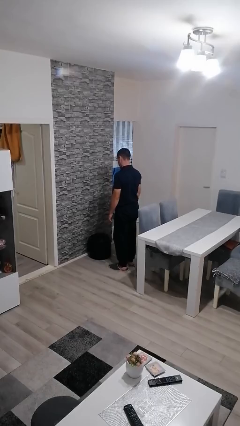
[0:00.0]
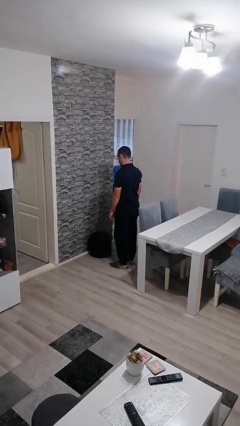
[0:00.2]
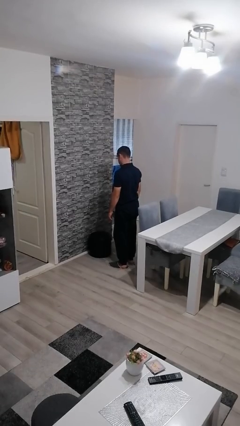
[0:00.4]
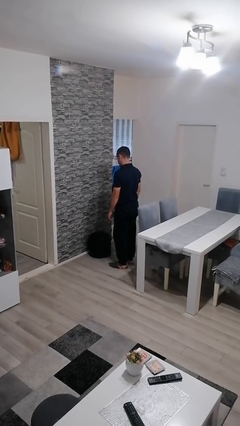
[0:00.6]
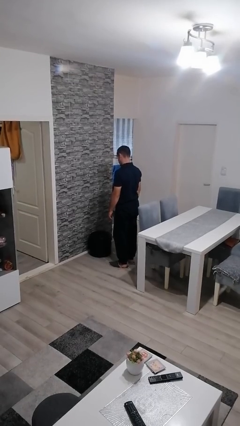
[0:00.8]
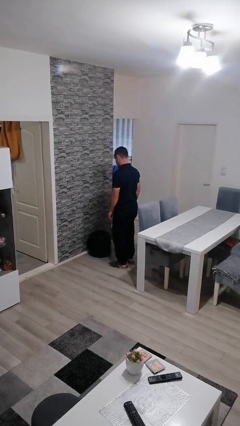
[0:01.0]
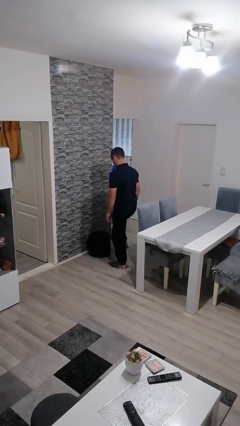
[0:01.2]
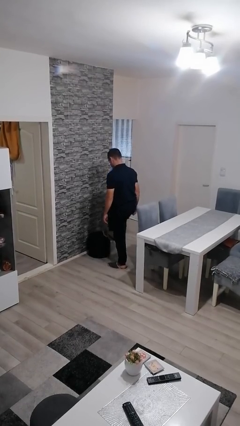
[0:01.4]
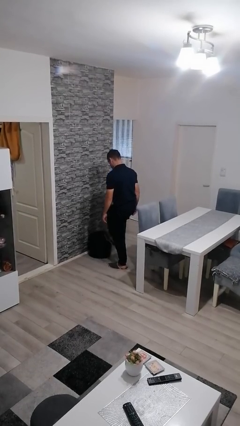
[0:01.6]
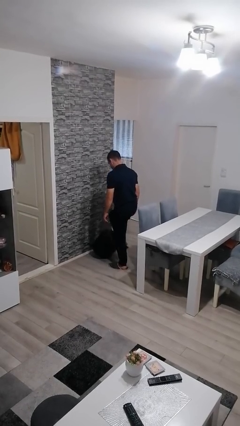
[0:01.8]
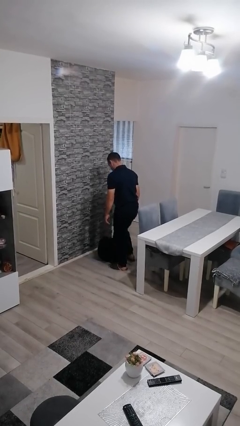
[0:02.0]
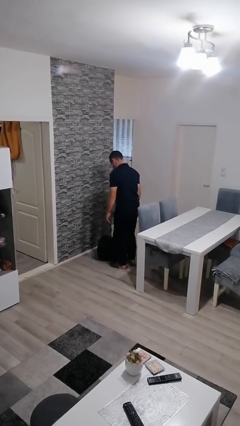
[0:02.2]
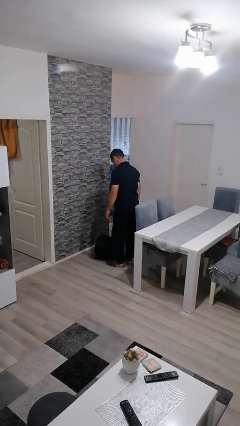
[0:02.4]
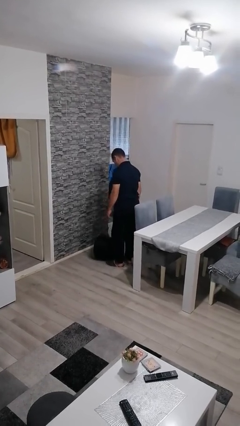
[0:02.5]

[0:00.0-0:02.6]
person knocks over furniture

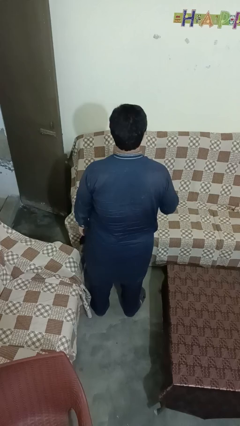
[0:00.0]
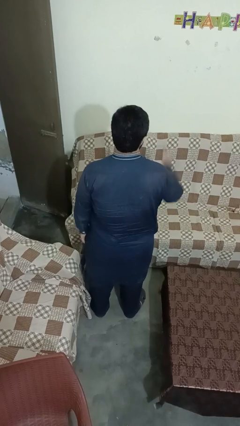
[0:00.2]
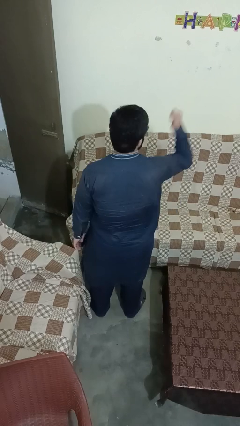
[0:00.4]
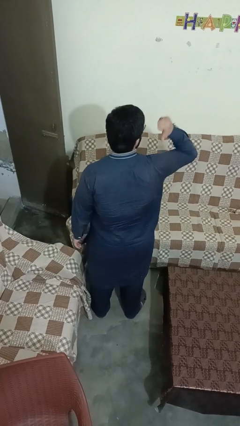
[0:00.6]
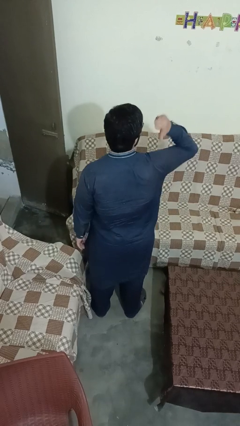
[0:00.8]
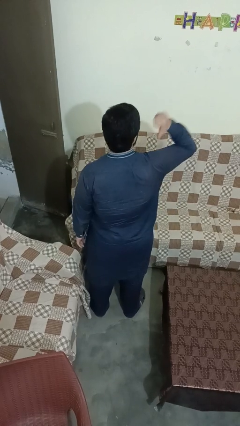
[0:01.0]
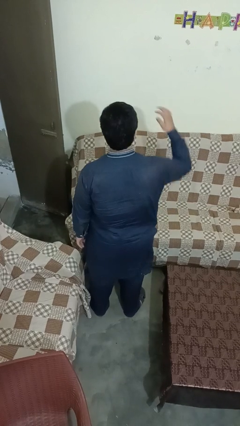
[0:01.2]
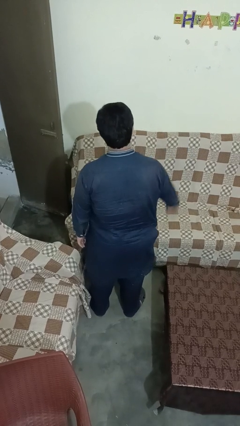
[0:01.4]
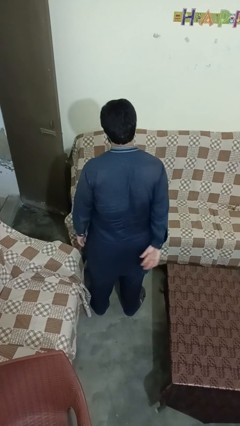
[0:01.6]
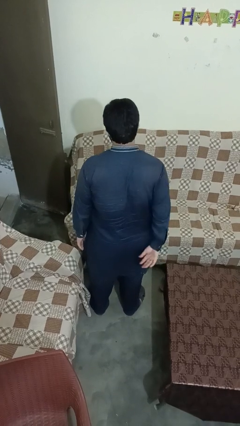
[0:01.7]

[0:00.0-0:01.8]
person gestures behind me

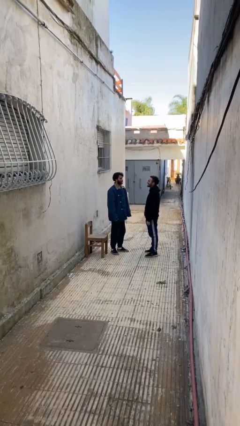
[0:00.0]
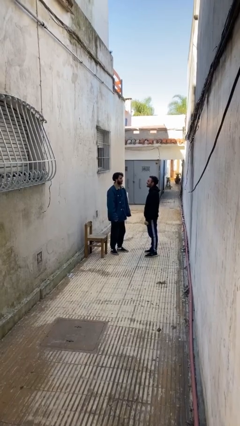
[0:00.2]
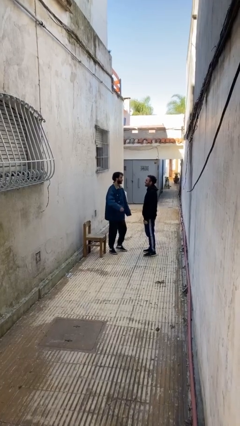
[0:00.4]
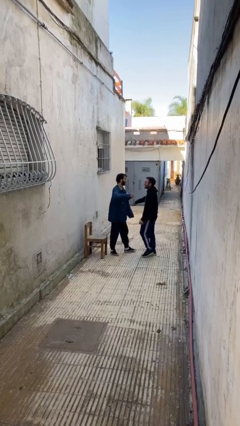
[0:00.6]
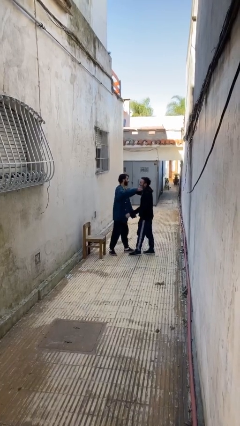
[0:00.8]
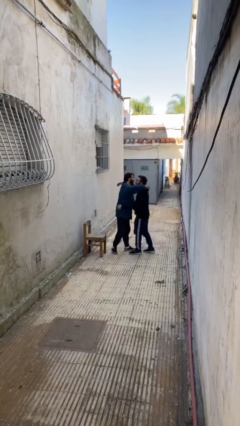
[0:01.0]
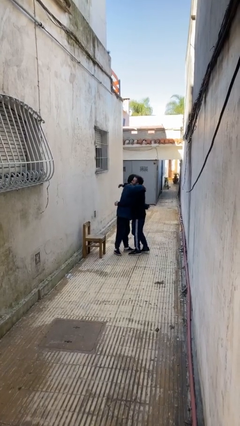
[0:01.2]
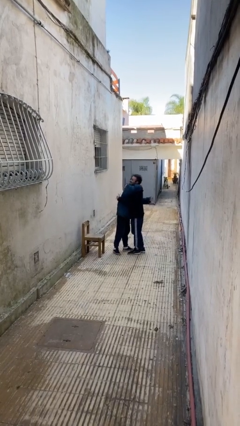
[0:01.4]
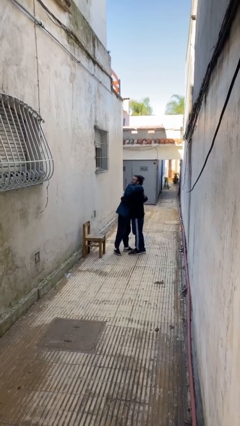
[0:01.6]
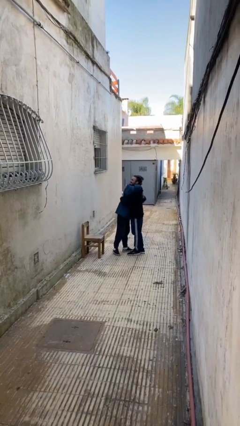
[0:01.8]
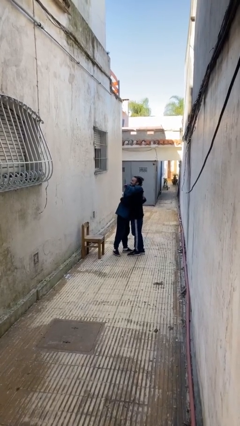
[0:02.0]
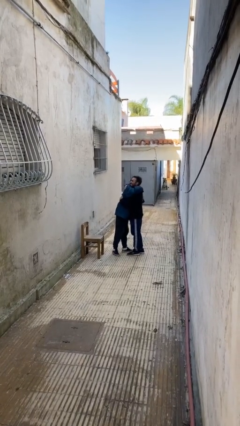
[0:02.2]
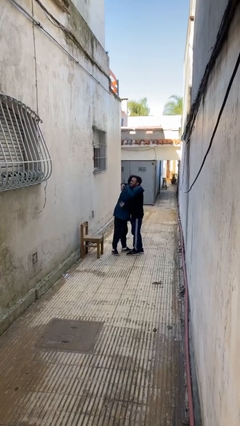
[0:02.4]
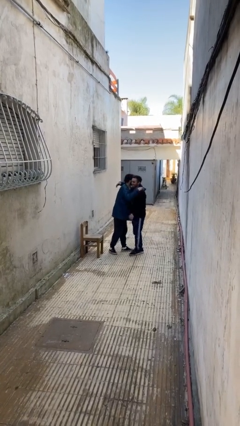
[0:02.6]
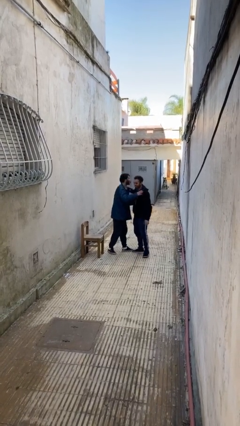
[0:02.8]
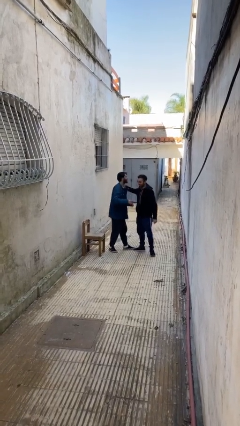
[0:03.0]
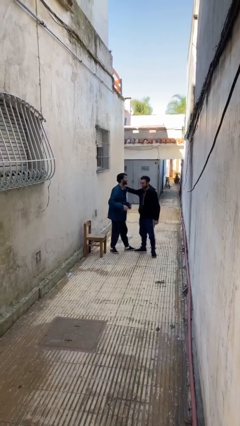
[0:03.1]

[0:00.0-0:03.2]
person embraces person

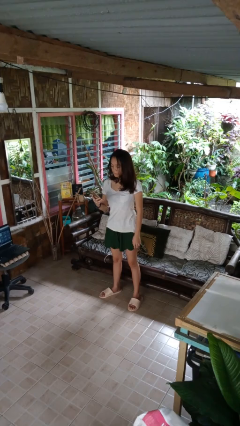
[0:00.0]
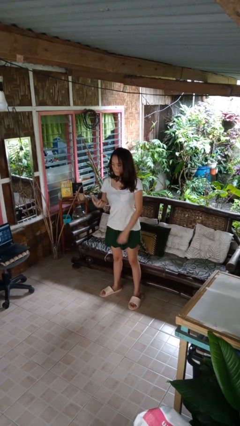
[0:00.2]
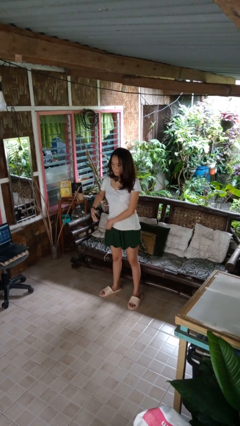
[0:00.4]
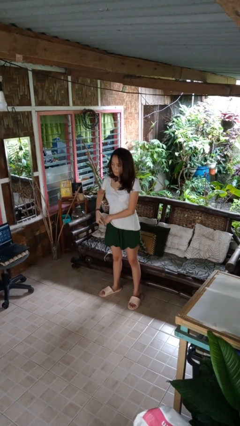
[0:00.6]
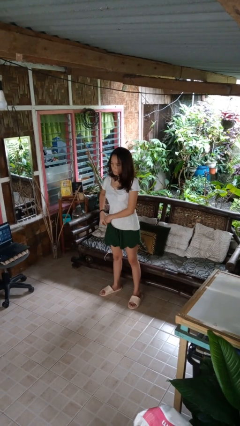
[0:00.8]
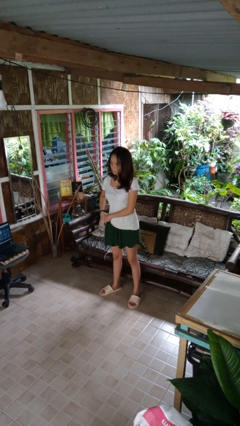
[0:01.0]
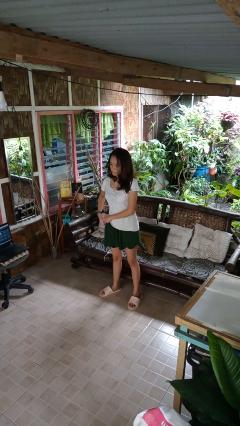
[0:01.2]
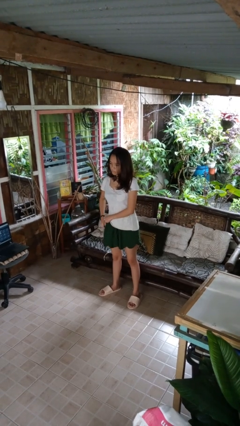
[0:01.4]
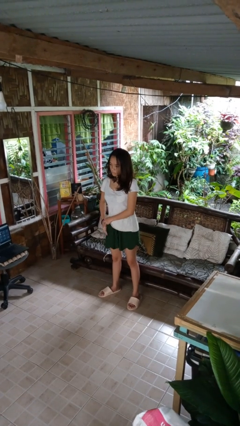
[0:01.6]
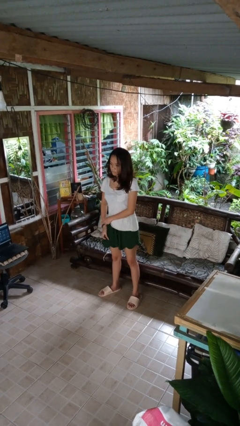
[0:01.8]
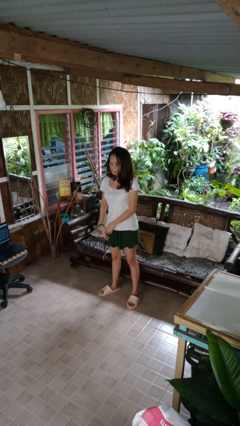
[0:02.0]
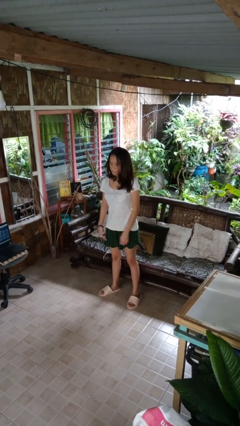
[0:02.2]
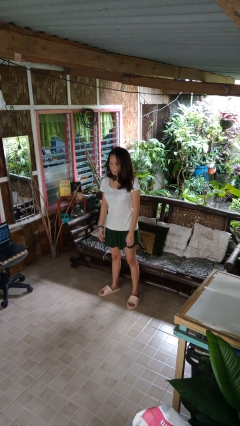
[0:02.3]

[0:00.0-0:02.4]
person puts phone into pocket

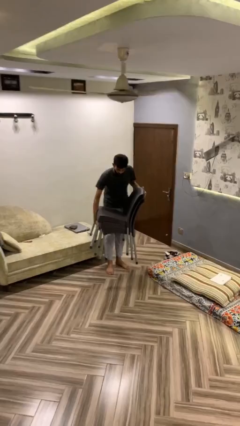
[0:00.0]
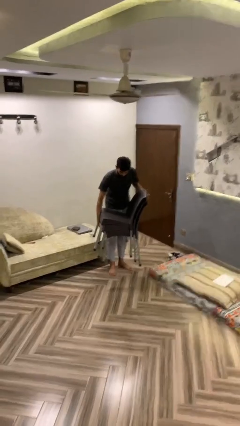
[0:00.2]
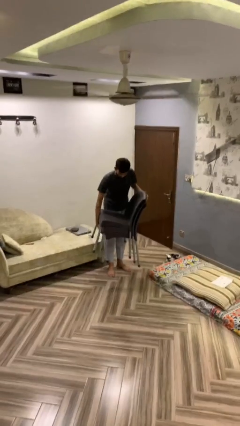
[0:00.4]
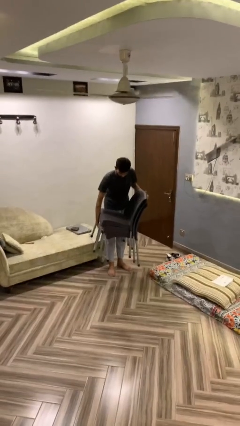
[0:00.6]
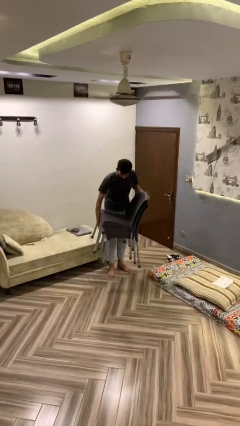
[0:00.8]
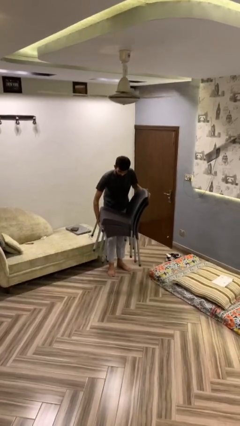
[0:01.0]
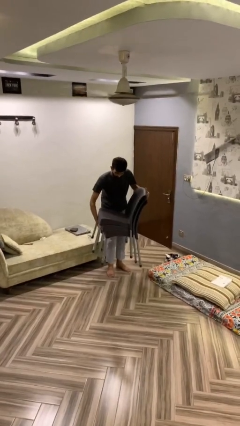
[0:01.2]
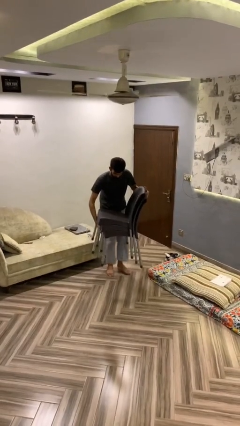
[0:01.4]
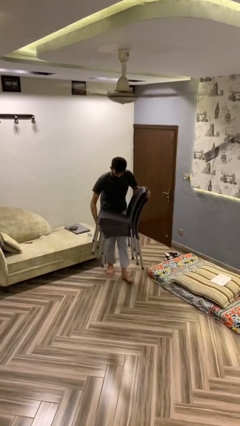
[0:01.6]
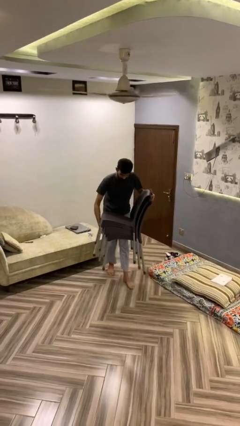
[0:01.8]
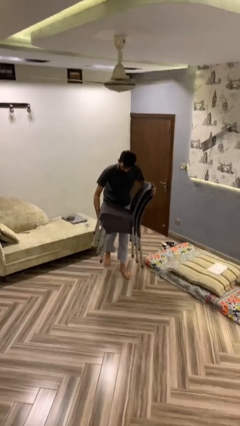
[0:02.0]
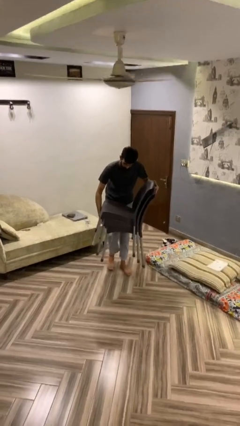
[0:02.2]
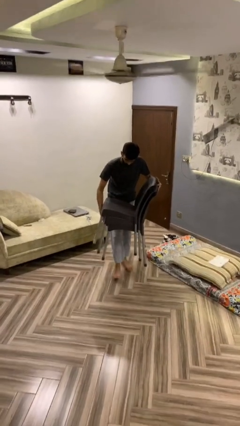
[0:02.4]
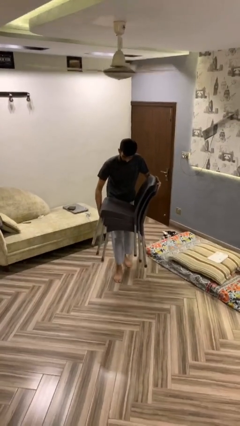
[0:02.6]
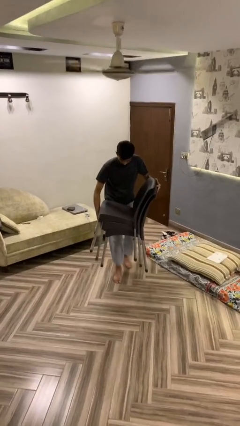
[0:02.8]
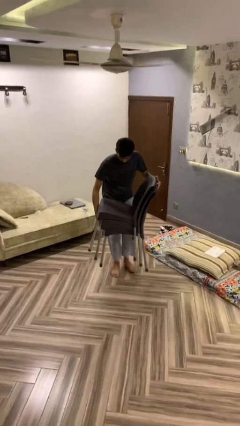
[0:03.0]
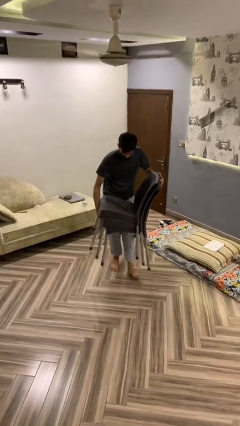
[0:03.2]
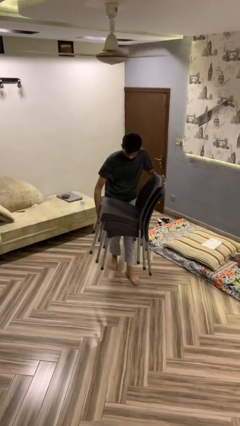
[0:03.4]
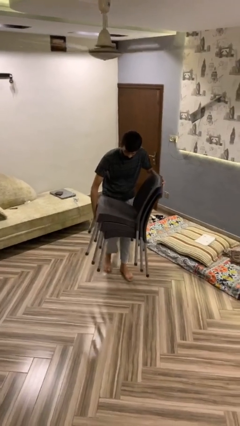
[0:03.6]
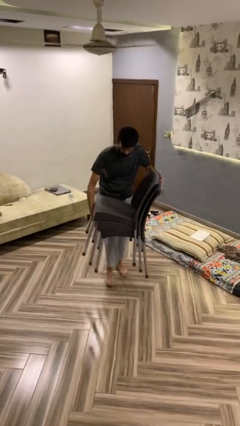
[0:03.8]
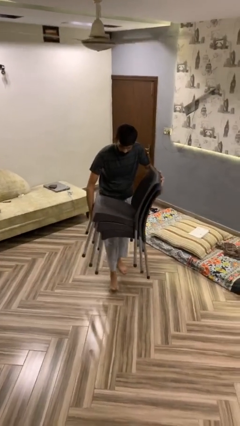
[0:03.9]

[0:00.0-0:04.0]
person carries heavy object

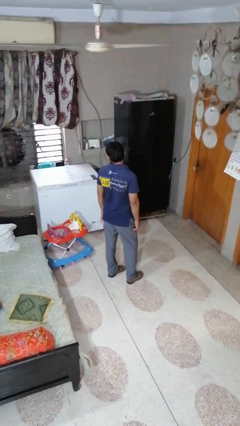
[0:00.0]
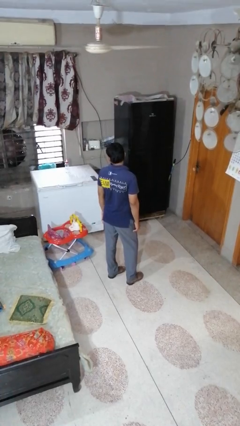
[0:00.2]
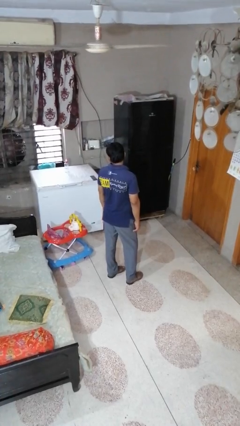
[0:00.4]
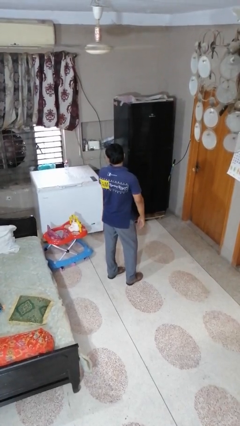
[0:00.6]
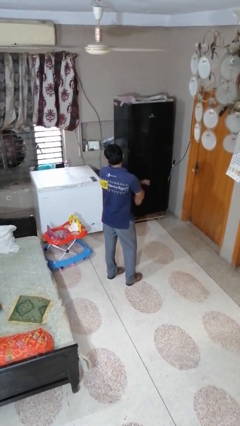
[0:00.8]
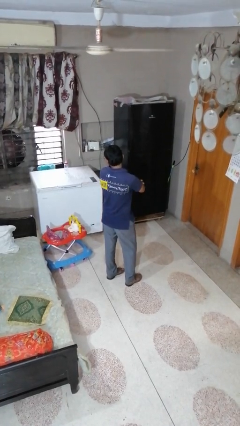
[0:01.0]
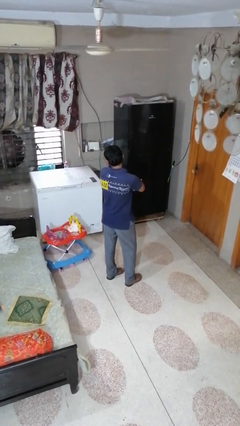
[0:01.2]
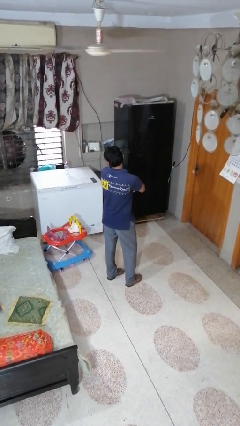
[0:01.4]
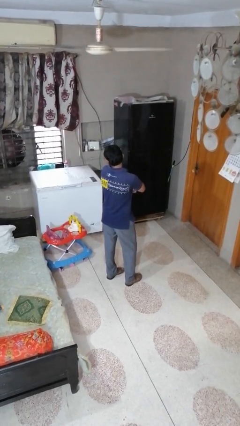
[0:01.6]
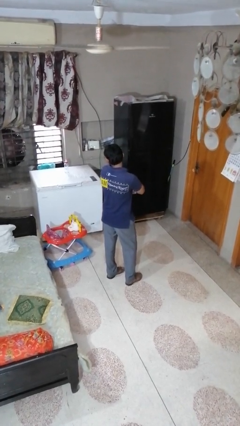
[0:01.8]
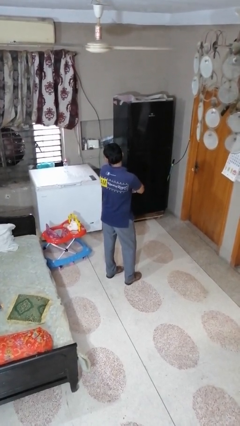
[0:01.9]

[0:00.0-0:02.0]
person crosses arms

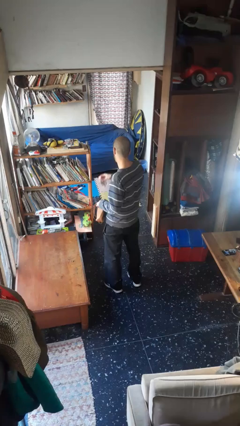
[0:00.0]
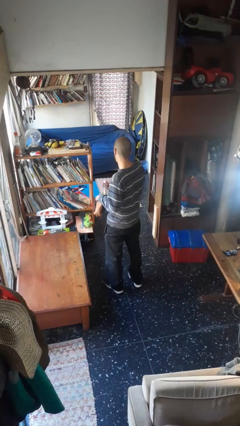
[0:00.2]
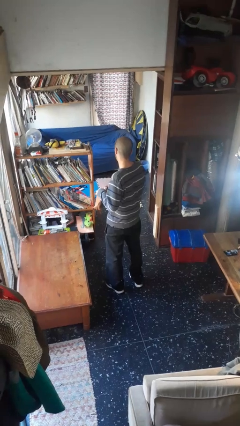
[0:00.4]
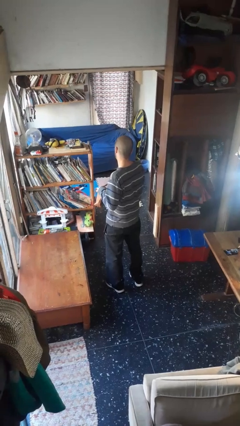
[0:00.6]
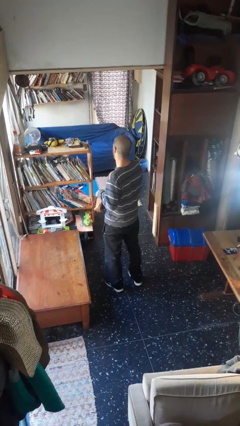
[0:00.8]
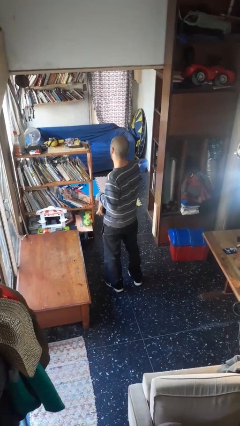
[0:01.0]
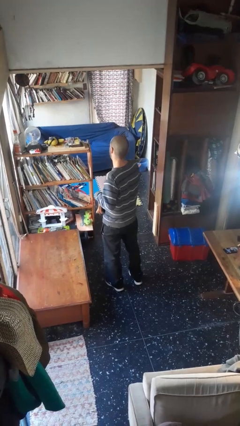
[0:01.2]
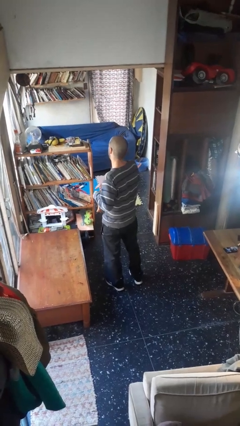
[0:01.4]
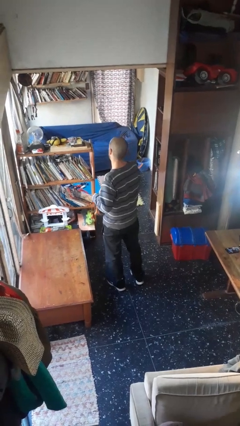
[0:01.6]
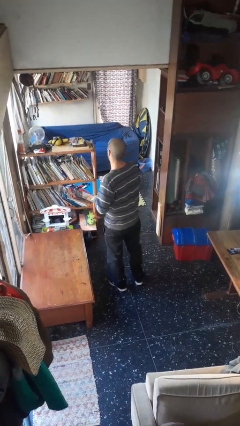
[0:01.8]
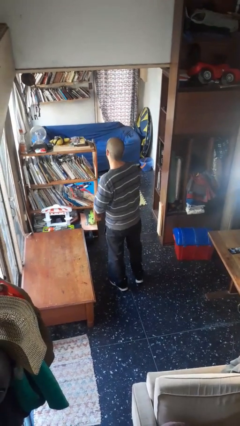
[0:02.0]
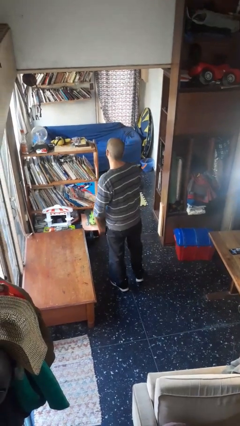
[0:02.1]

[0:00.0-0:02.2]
person puts object into purse
